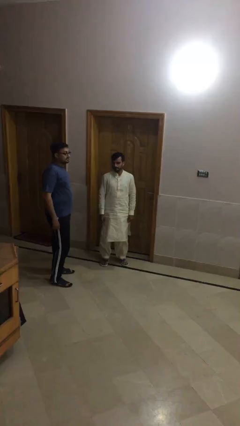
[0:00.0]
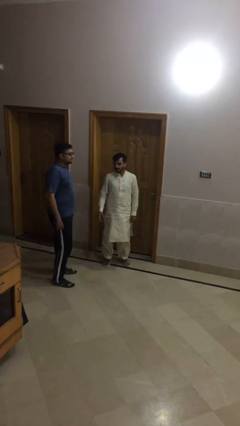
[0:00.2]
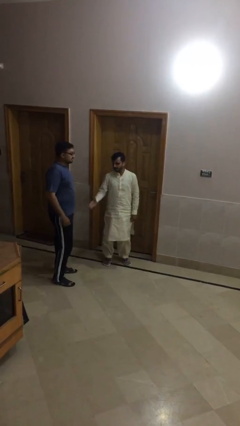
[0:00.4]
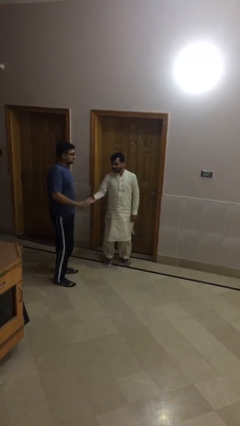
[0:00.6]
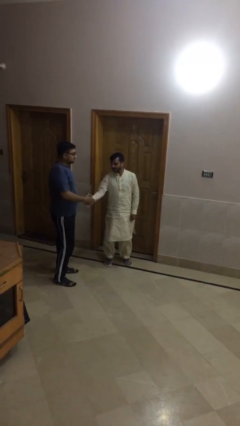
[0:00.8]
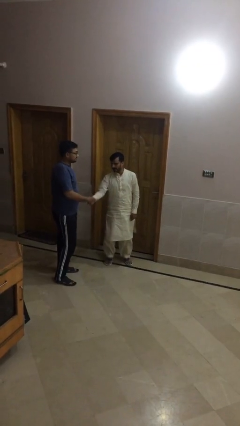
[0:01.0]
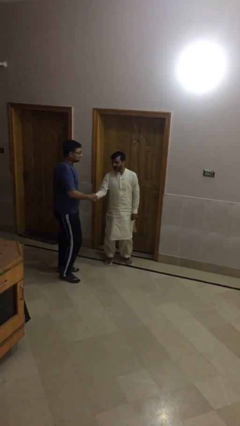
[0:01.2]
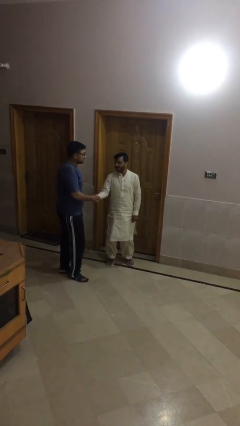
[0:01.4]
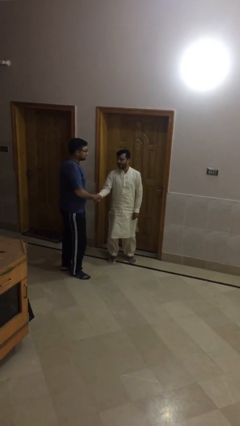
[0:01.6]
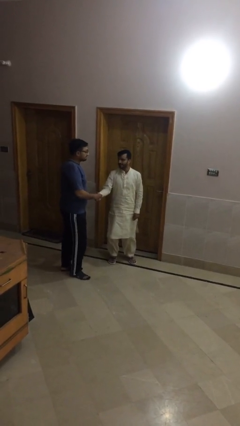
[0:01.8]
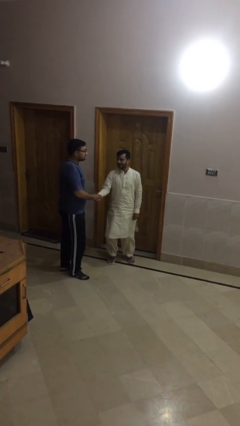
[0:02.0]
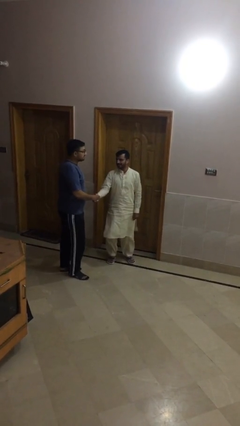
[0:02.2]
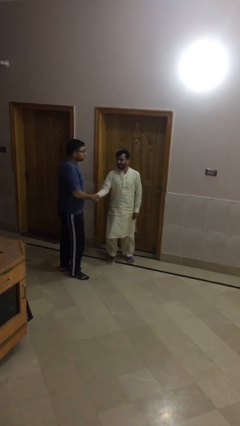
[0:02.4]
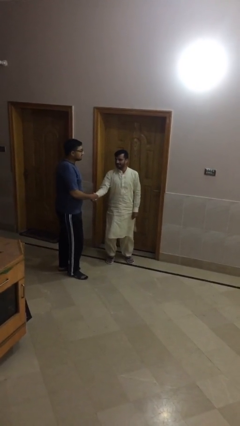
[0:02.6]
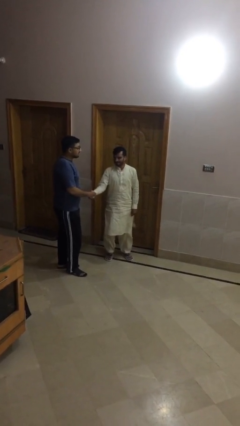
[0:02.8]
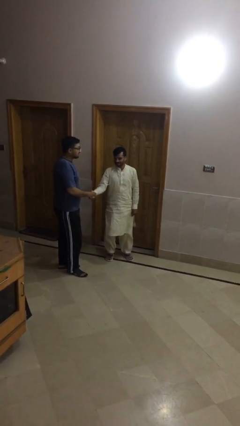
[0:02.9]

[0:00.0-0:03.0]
person shakes hand

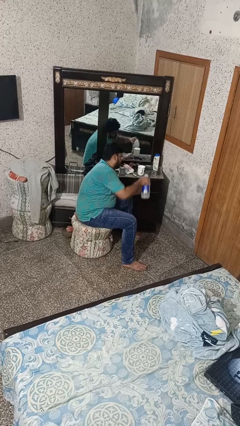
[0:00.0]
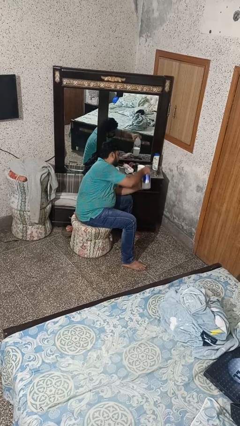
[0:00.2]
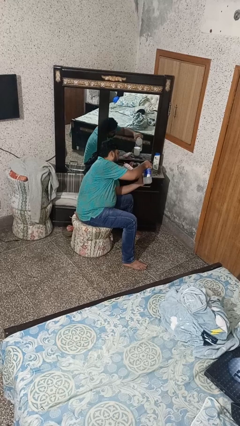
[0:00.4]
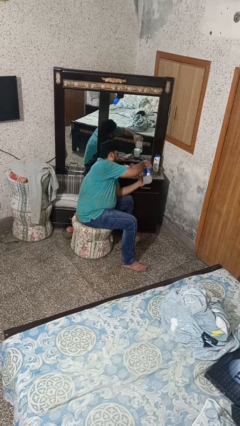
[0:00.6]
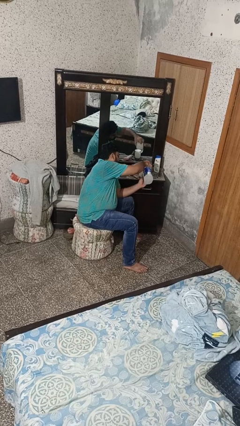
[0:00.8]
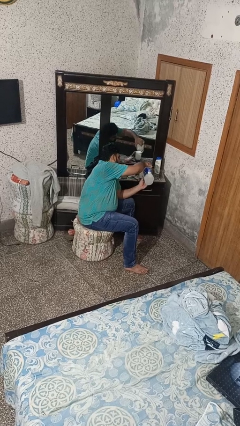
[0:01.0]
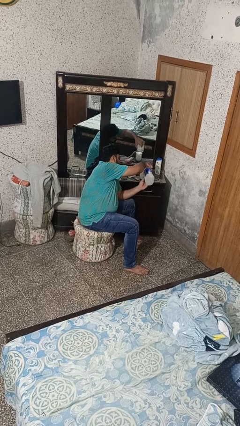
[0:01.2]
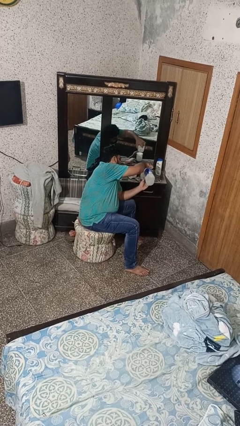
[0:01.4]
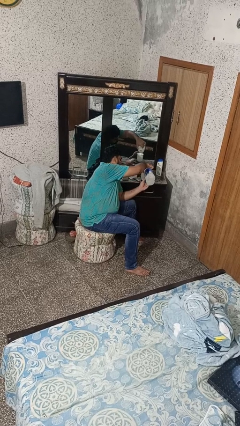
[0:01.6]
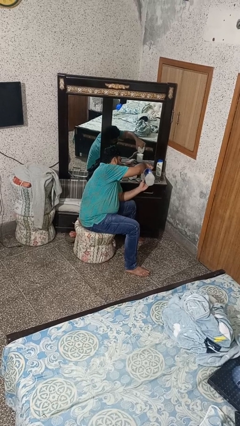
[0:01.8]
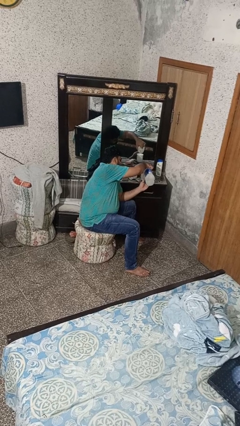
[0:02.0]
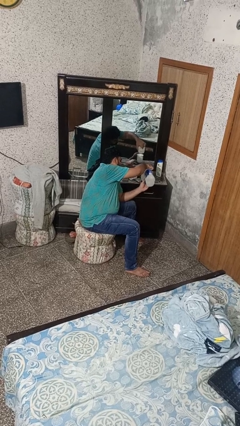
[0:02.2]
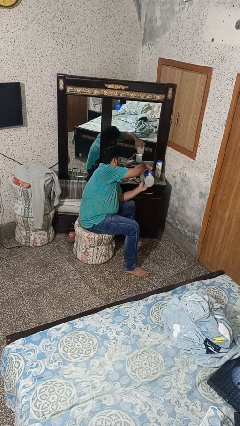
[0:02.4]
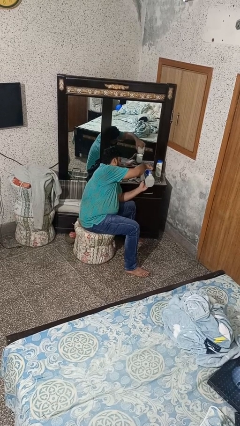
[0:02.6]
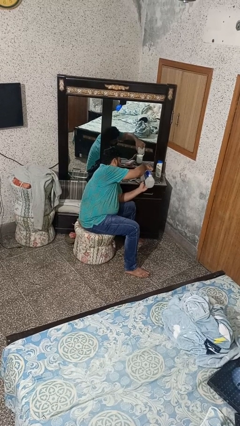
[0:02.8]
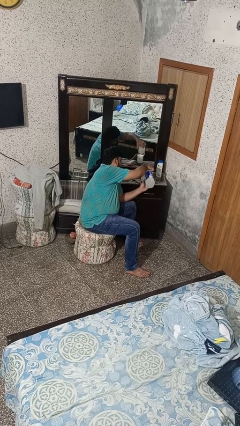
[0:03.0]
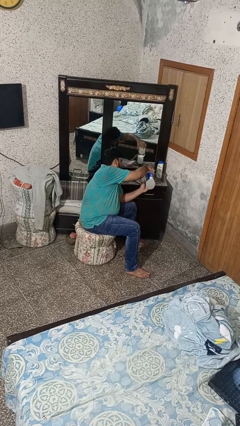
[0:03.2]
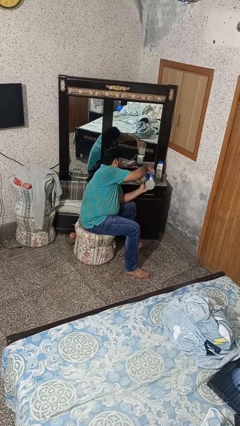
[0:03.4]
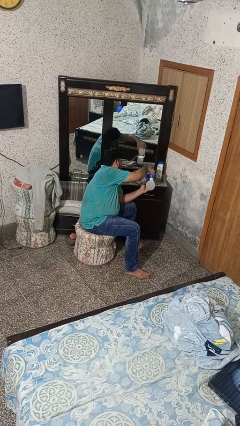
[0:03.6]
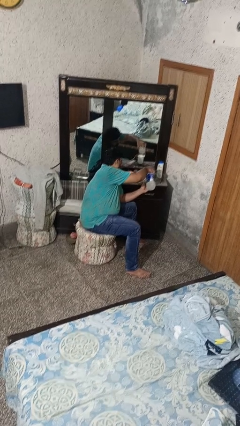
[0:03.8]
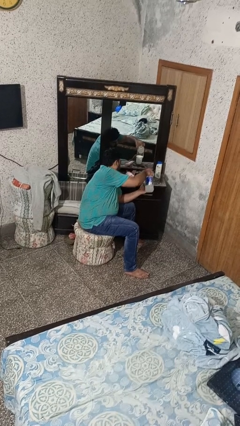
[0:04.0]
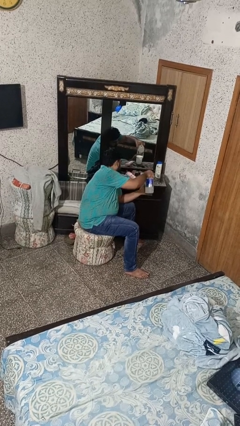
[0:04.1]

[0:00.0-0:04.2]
person pours liquid into cup

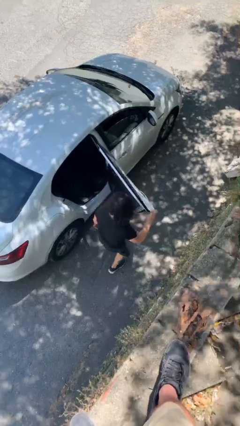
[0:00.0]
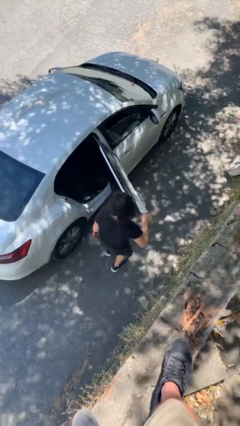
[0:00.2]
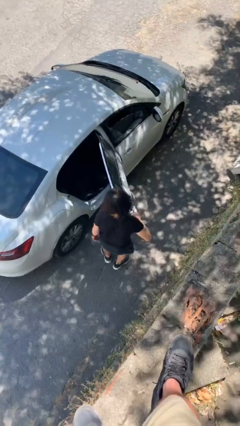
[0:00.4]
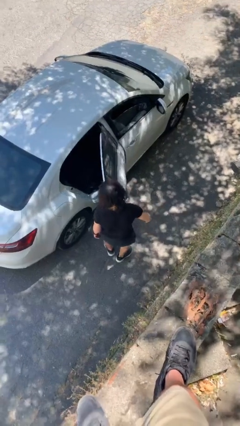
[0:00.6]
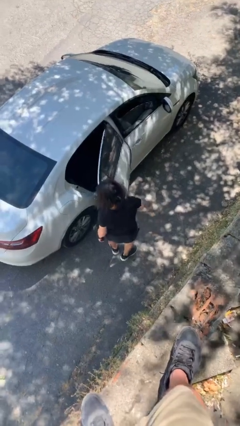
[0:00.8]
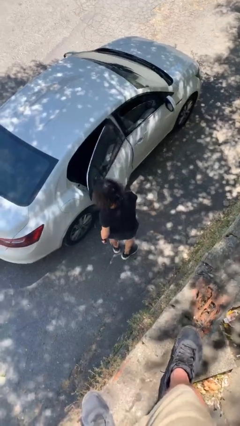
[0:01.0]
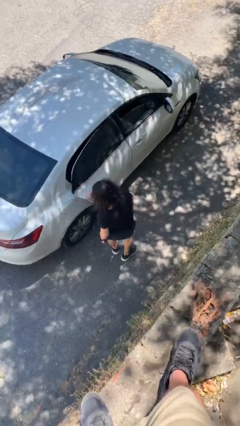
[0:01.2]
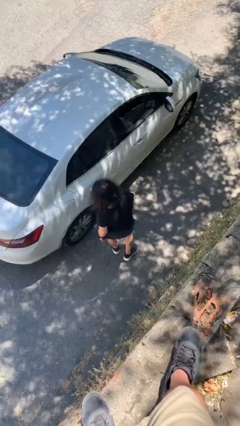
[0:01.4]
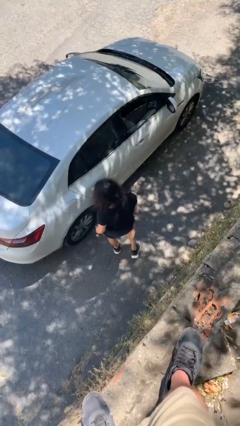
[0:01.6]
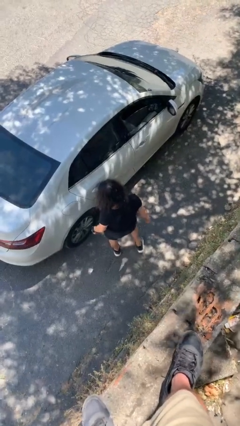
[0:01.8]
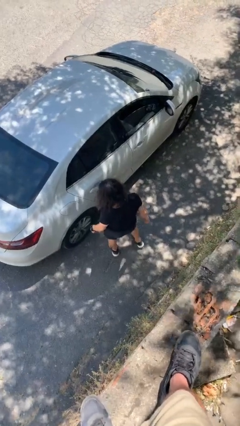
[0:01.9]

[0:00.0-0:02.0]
person closes car door

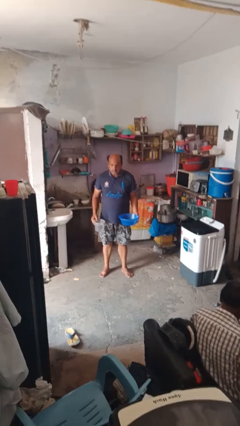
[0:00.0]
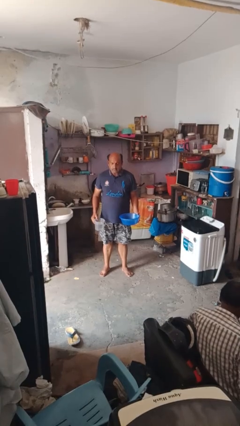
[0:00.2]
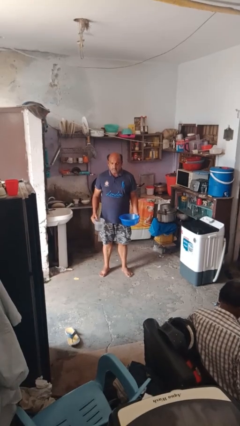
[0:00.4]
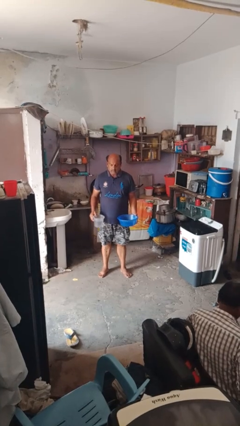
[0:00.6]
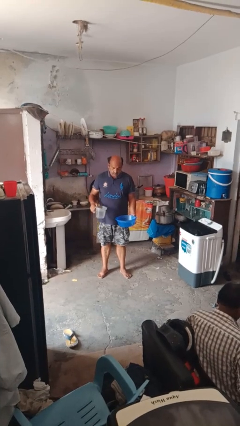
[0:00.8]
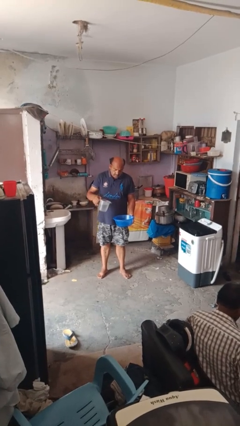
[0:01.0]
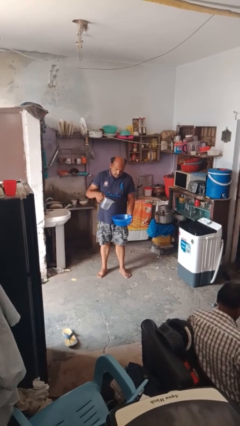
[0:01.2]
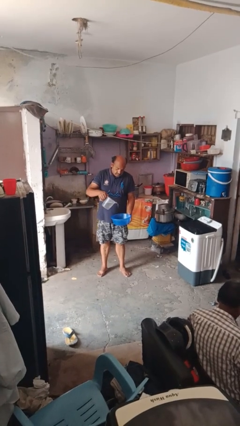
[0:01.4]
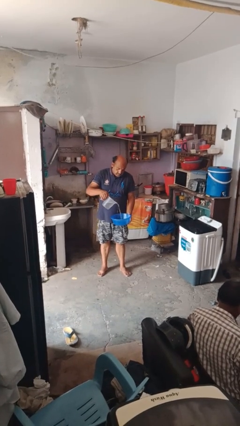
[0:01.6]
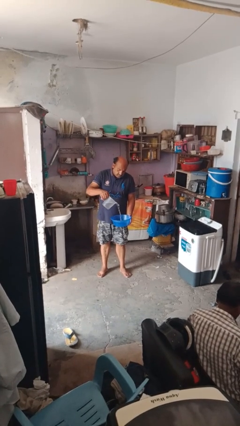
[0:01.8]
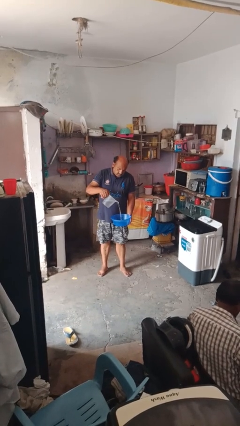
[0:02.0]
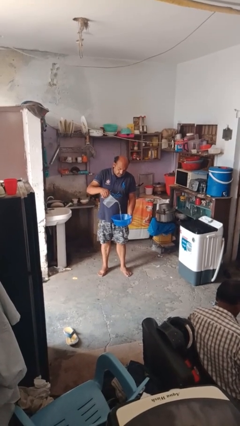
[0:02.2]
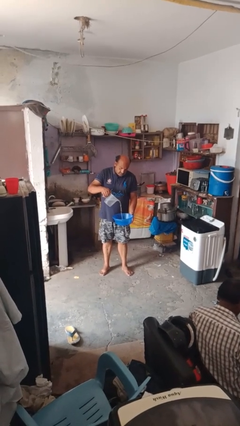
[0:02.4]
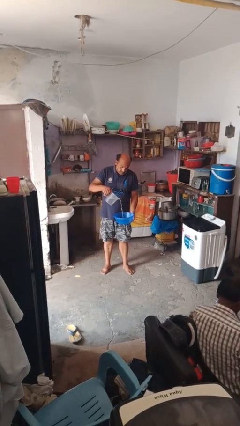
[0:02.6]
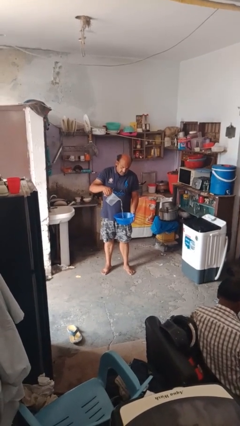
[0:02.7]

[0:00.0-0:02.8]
person pours into bowl

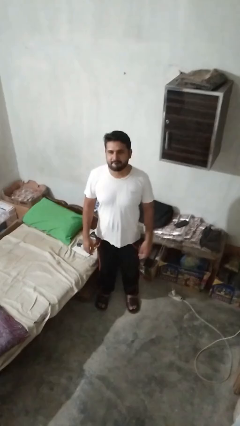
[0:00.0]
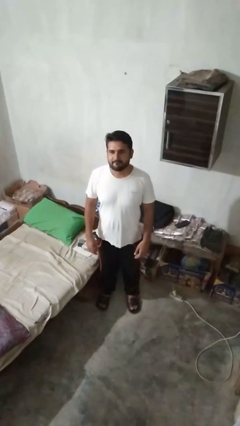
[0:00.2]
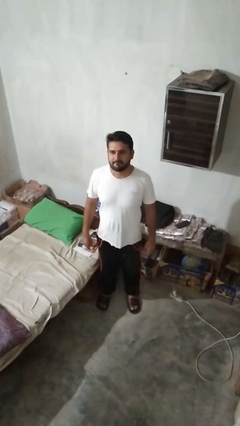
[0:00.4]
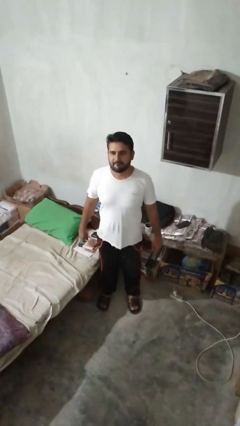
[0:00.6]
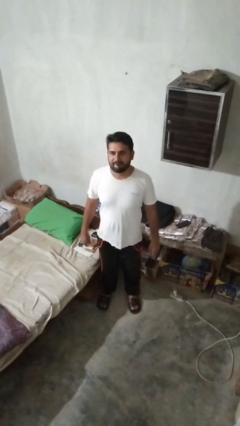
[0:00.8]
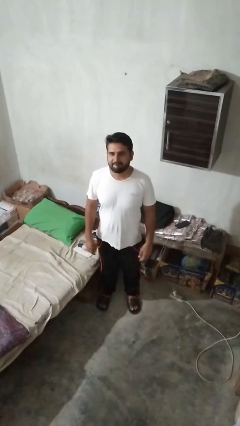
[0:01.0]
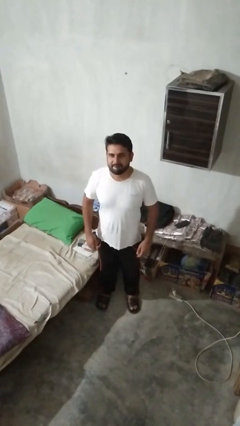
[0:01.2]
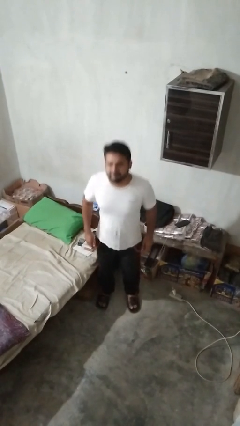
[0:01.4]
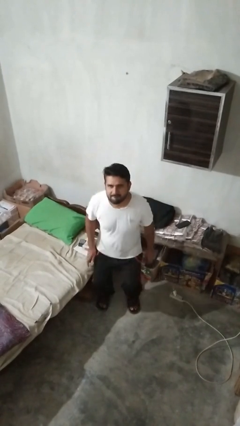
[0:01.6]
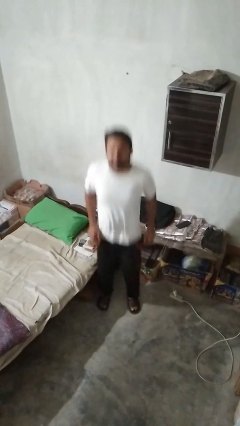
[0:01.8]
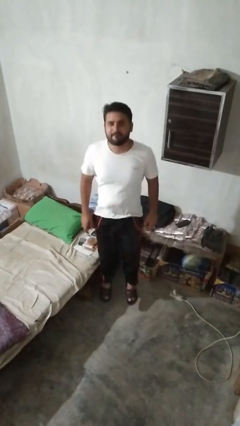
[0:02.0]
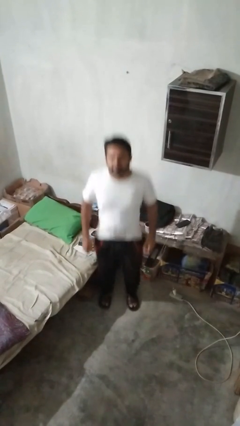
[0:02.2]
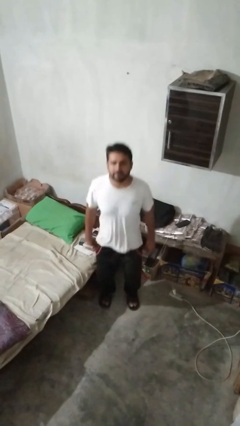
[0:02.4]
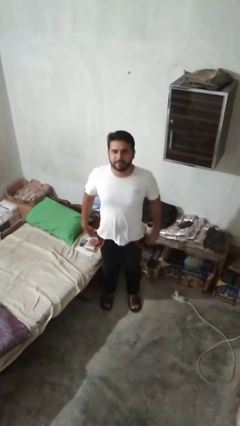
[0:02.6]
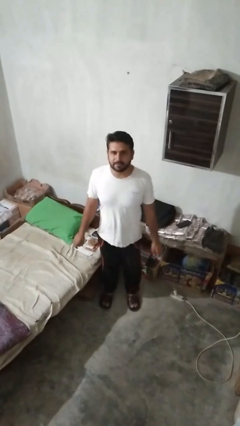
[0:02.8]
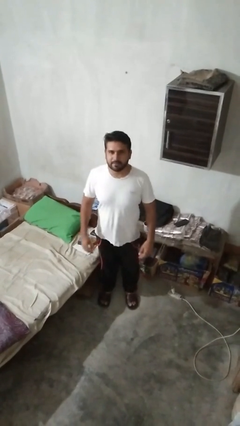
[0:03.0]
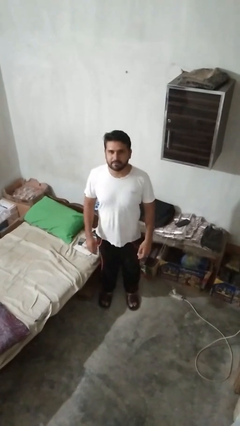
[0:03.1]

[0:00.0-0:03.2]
person jumps

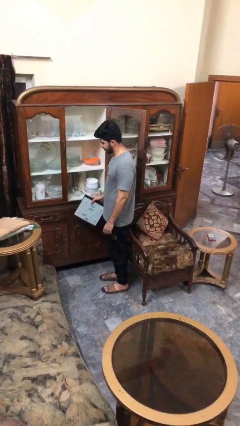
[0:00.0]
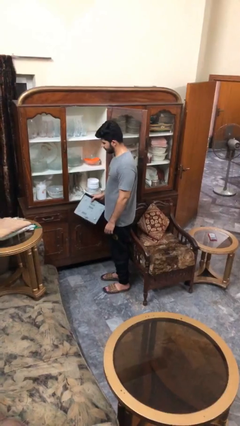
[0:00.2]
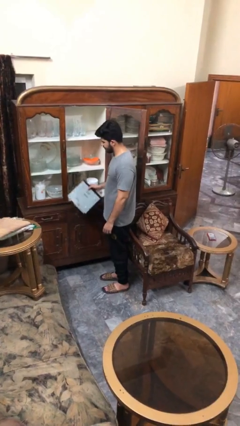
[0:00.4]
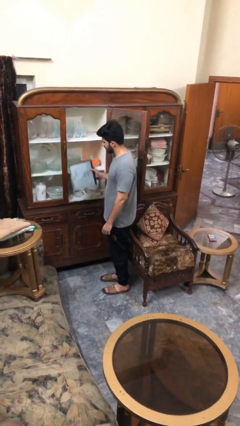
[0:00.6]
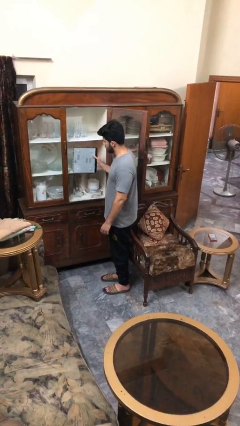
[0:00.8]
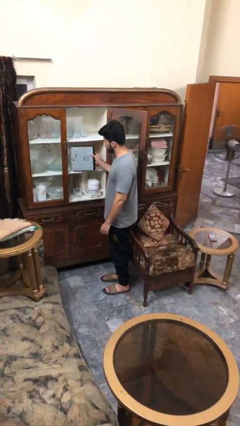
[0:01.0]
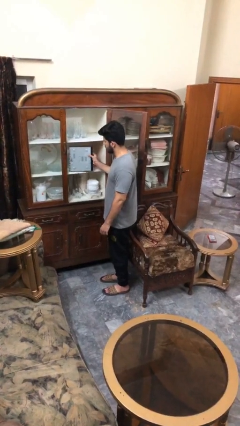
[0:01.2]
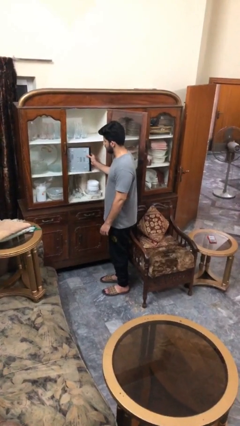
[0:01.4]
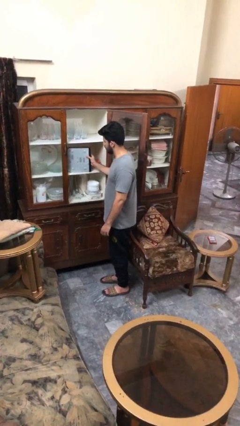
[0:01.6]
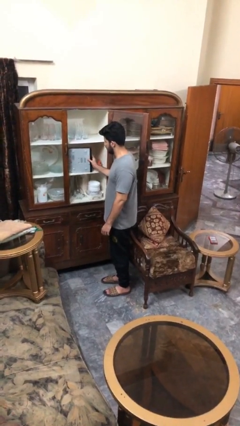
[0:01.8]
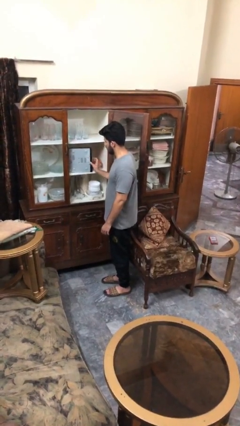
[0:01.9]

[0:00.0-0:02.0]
person puts down object into cabinet

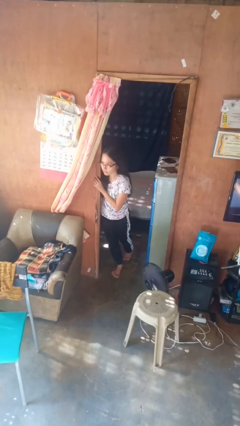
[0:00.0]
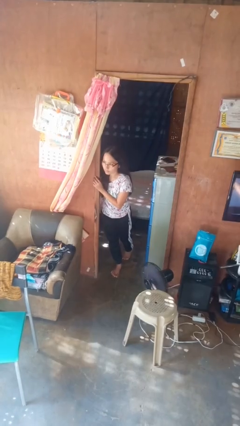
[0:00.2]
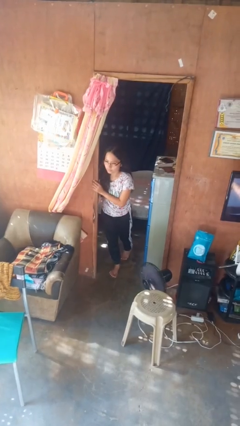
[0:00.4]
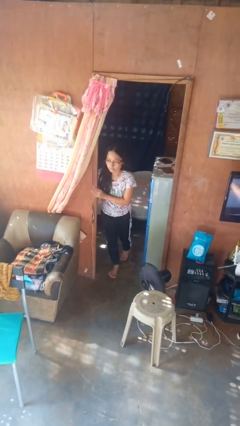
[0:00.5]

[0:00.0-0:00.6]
person bumps into wall
